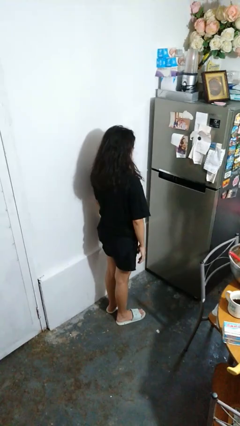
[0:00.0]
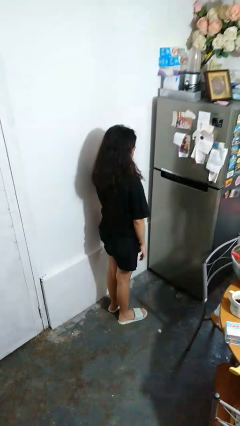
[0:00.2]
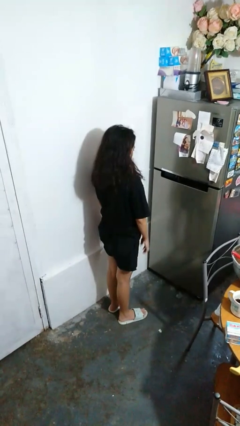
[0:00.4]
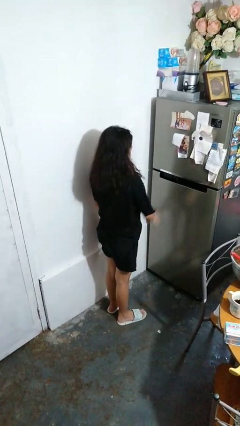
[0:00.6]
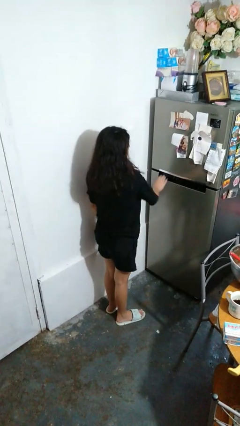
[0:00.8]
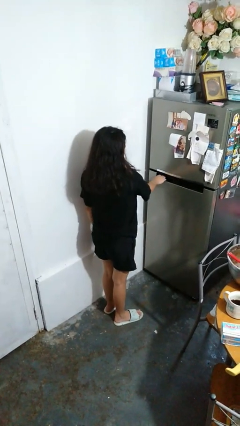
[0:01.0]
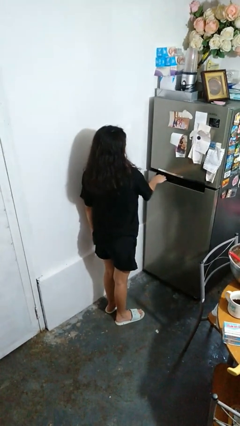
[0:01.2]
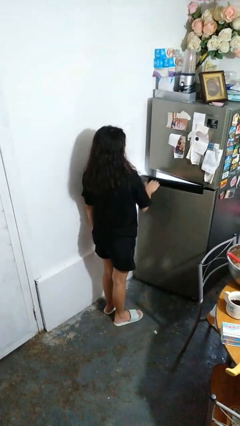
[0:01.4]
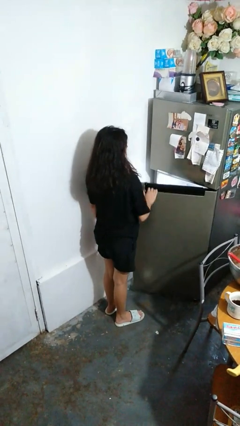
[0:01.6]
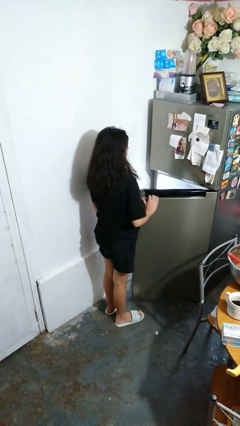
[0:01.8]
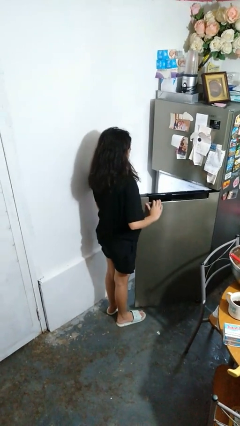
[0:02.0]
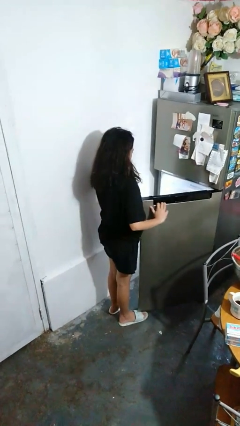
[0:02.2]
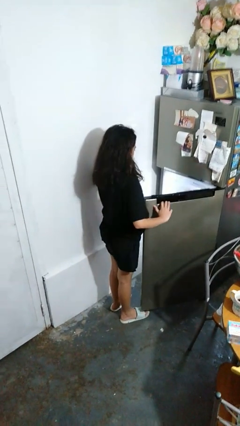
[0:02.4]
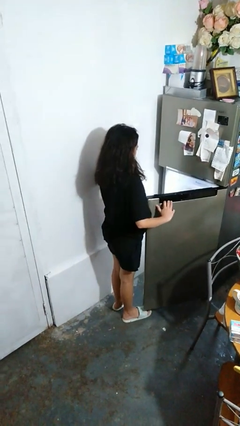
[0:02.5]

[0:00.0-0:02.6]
person opens refrigerator

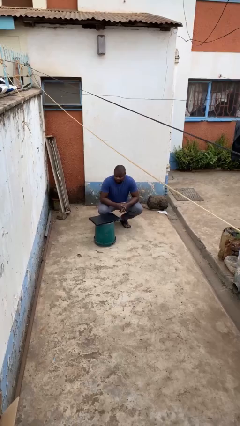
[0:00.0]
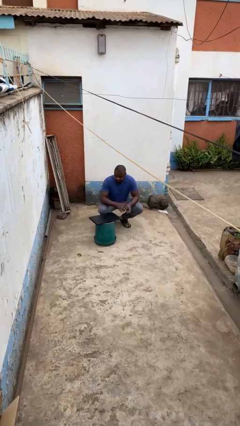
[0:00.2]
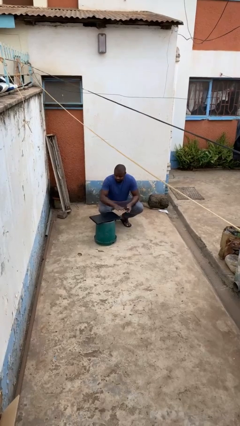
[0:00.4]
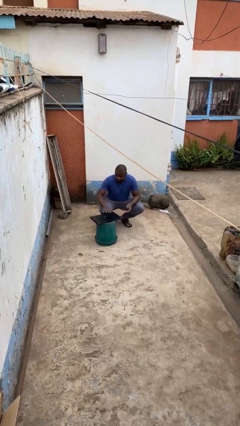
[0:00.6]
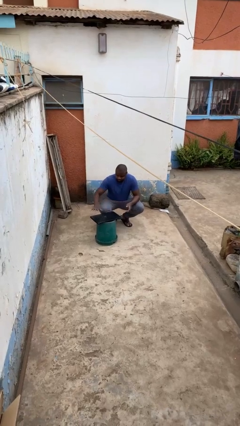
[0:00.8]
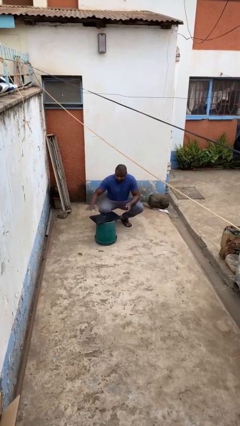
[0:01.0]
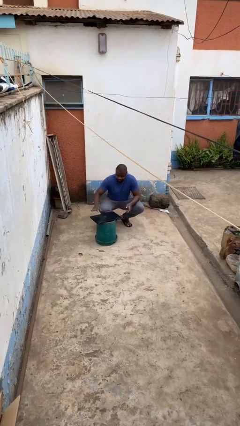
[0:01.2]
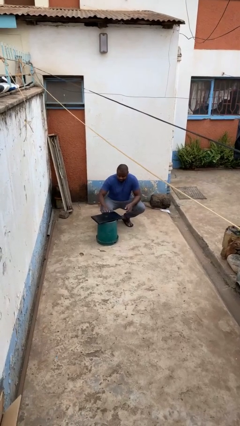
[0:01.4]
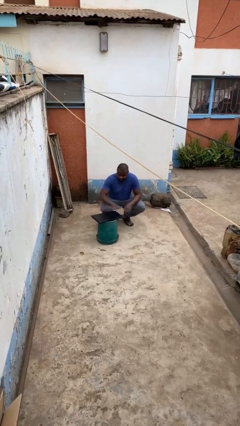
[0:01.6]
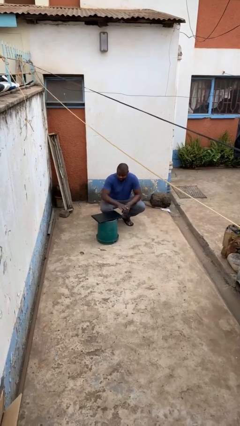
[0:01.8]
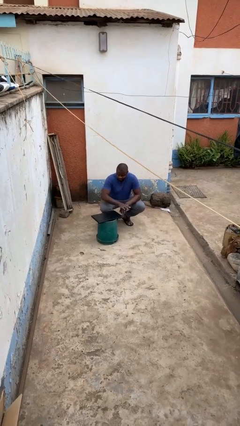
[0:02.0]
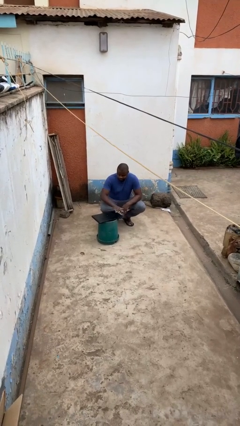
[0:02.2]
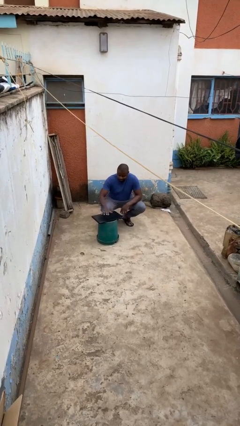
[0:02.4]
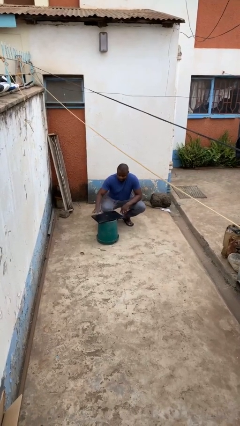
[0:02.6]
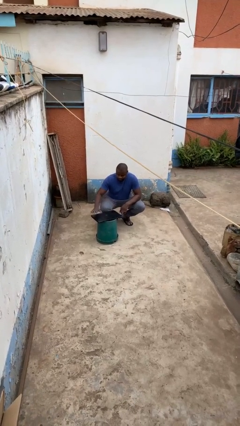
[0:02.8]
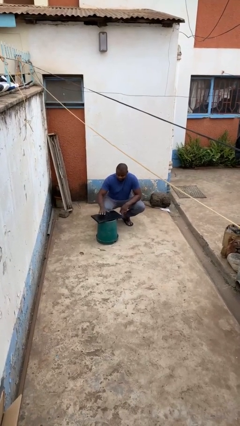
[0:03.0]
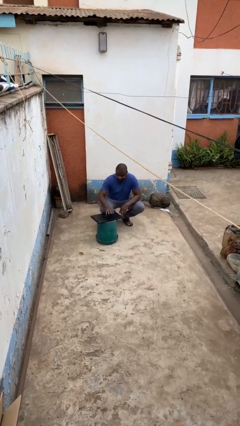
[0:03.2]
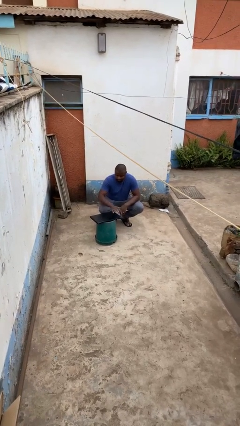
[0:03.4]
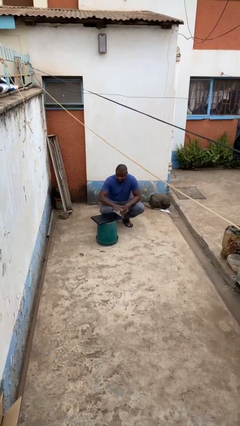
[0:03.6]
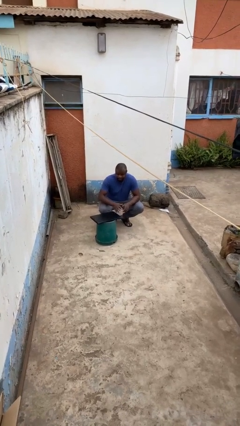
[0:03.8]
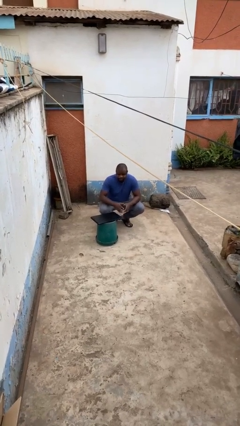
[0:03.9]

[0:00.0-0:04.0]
person waves hand over object

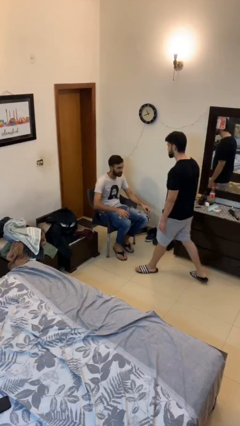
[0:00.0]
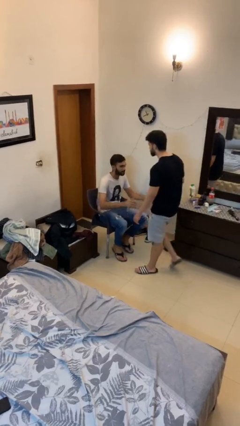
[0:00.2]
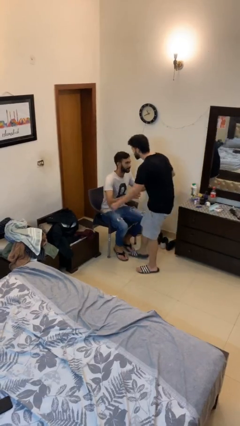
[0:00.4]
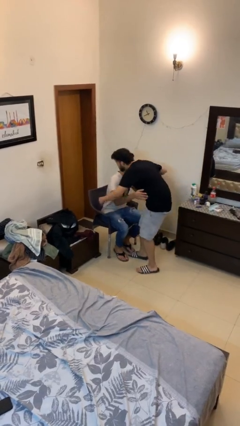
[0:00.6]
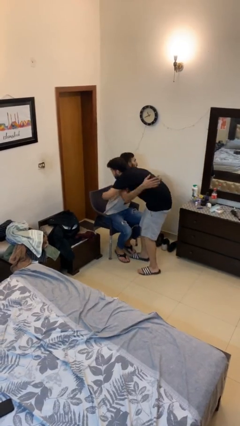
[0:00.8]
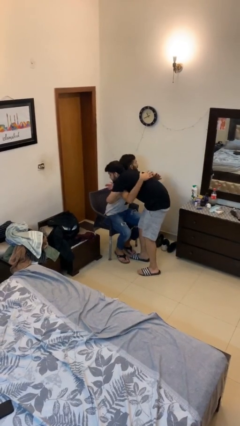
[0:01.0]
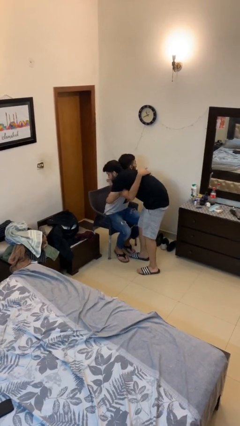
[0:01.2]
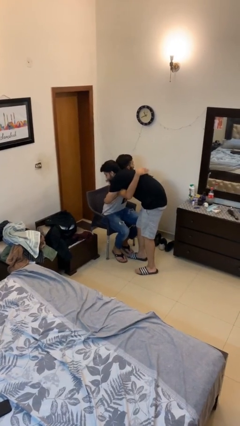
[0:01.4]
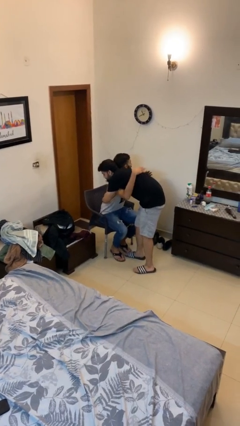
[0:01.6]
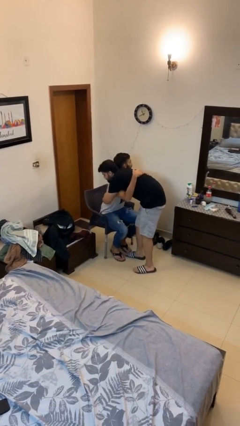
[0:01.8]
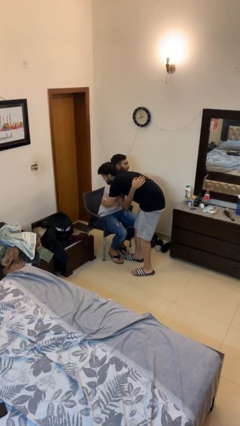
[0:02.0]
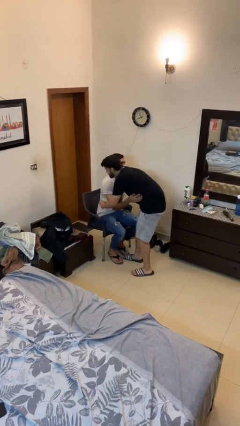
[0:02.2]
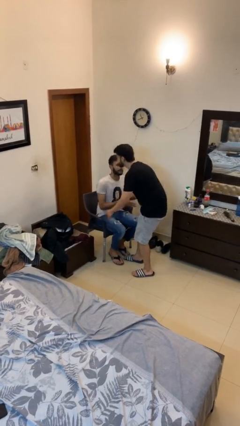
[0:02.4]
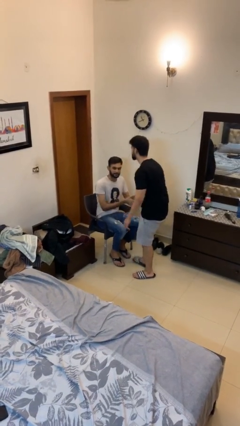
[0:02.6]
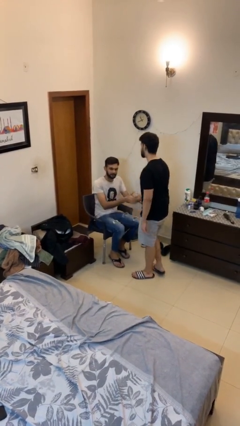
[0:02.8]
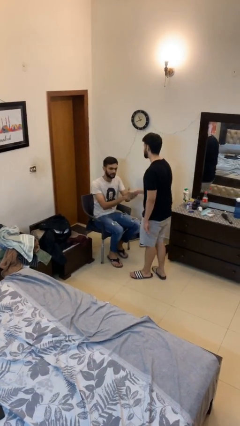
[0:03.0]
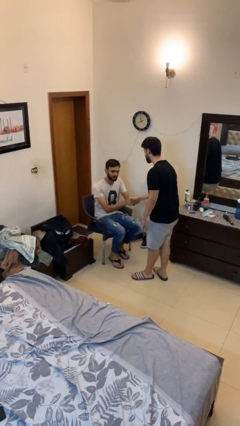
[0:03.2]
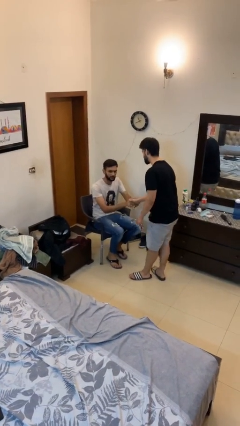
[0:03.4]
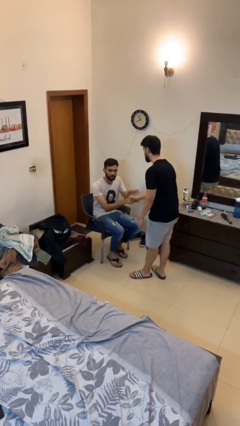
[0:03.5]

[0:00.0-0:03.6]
person embraces person

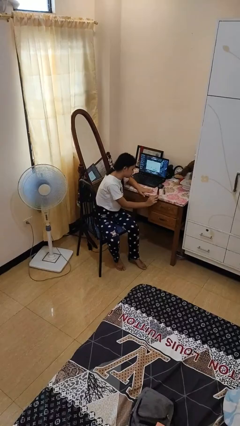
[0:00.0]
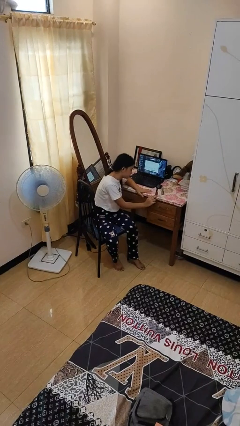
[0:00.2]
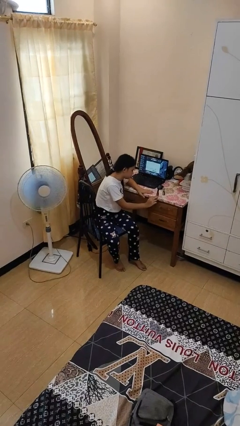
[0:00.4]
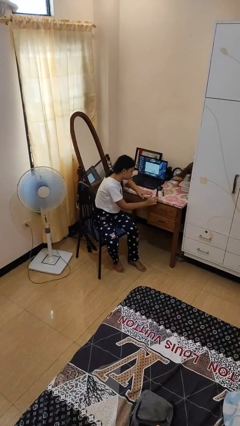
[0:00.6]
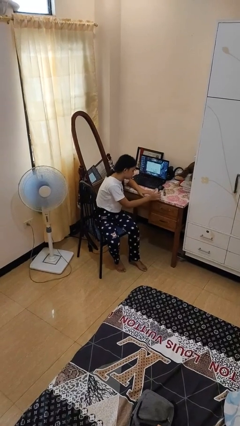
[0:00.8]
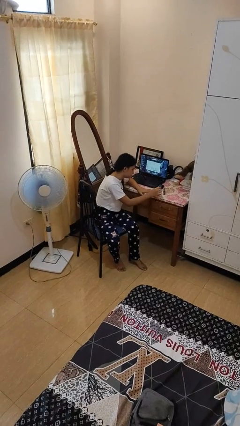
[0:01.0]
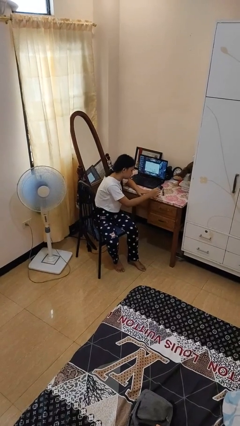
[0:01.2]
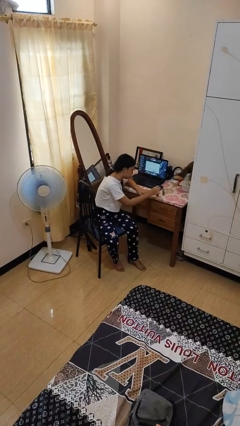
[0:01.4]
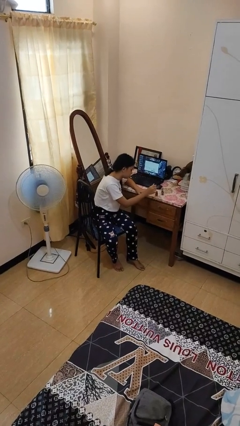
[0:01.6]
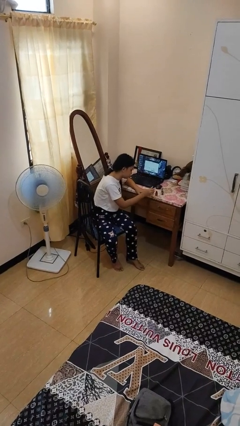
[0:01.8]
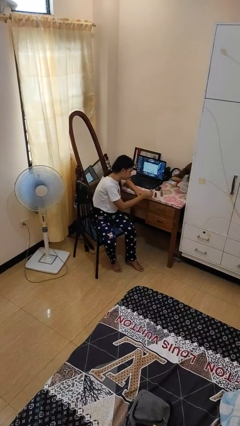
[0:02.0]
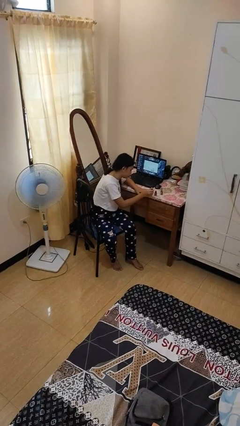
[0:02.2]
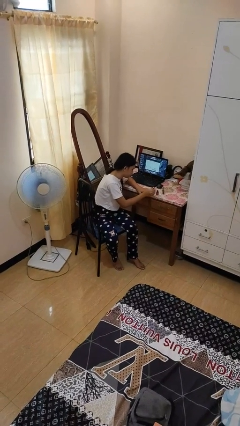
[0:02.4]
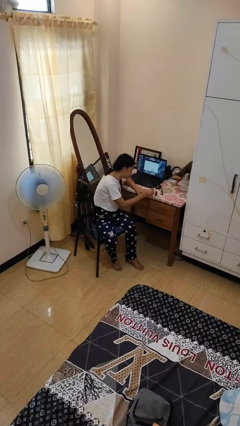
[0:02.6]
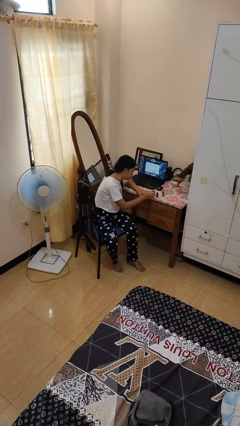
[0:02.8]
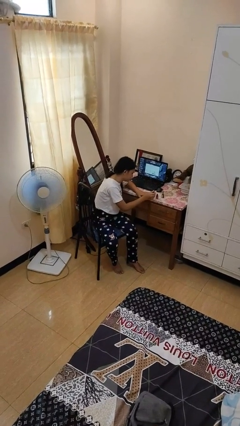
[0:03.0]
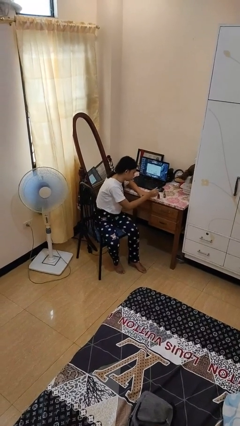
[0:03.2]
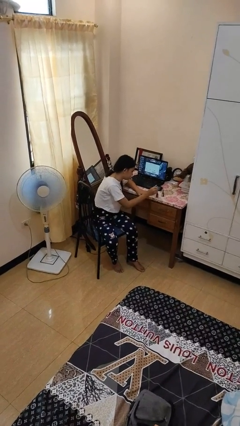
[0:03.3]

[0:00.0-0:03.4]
person paints fingernails

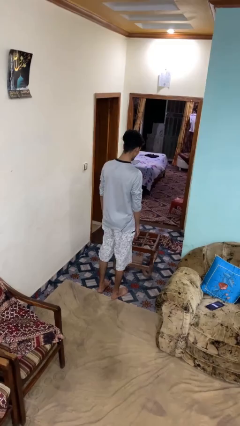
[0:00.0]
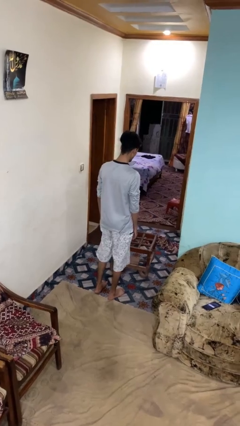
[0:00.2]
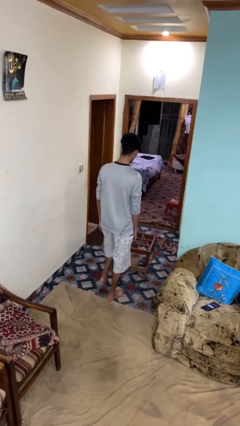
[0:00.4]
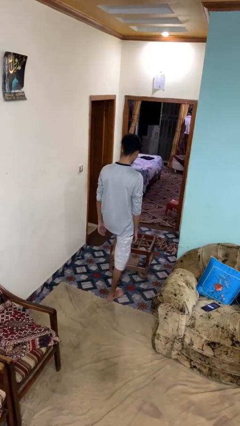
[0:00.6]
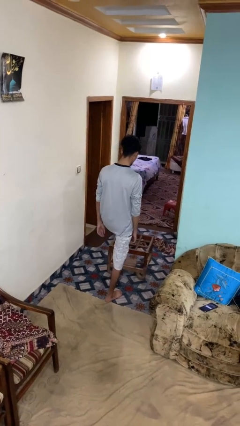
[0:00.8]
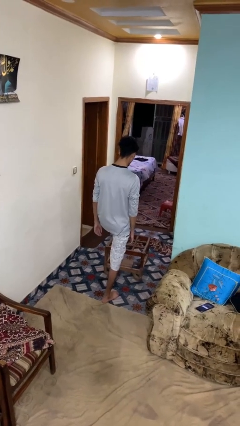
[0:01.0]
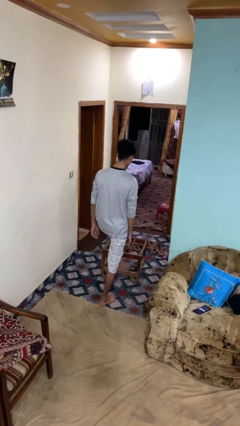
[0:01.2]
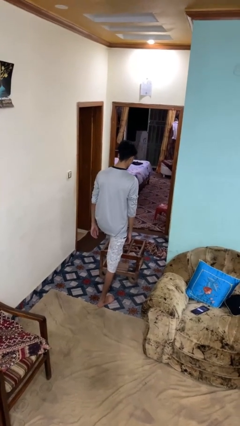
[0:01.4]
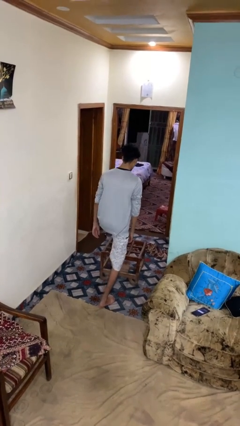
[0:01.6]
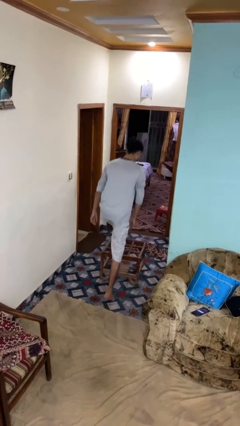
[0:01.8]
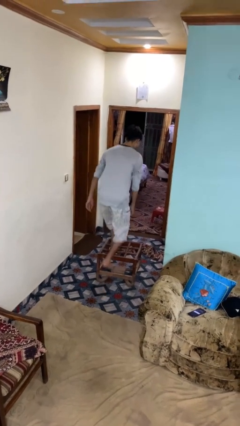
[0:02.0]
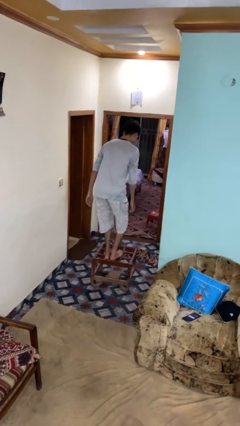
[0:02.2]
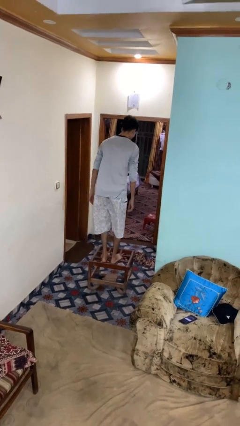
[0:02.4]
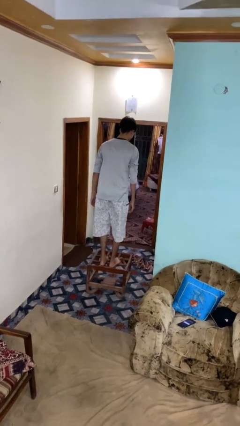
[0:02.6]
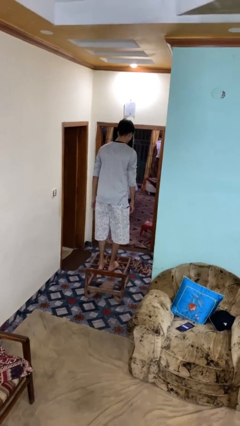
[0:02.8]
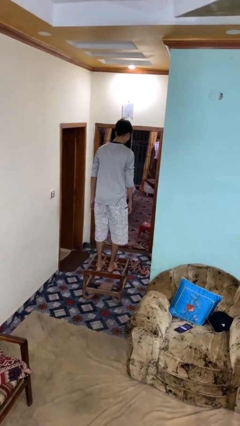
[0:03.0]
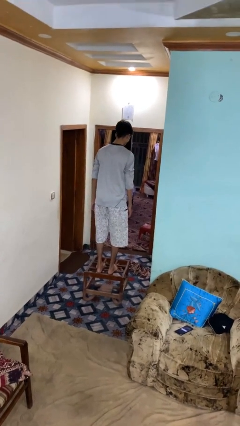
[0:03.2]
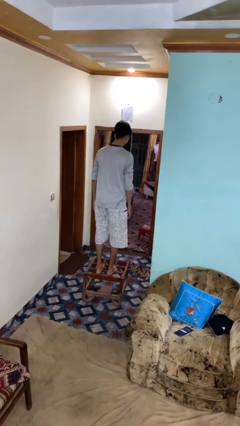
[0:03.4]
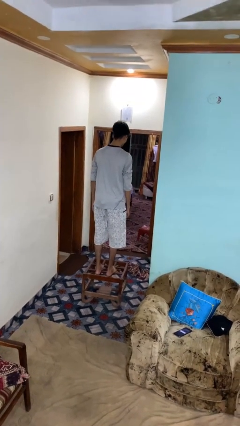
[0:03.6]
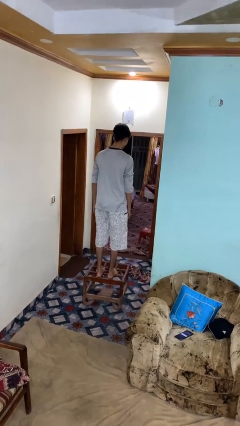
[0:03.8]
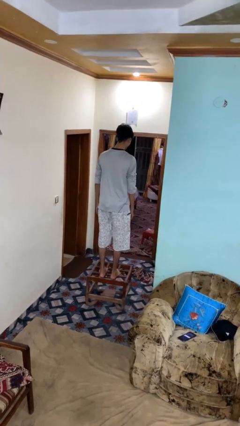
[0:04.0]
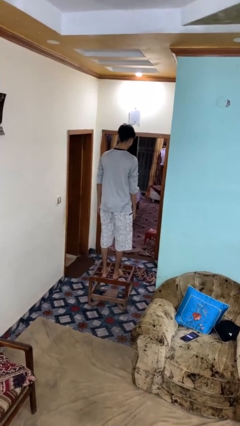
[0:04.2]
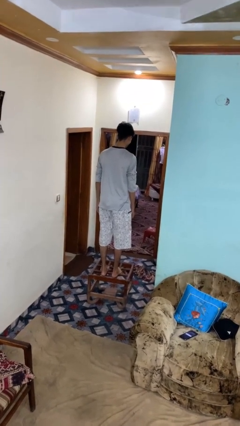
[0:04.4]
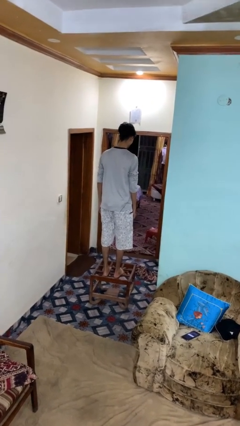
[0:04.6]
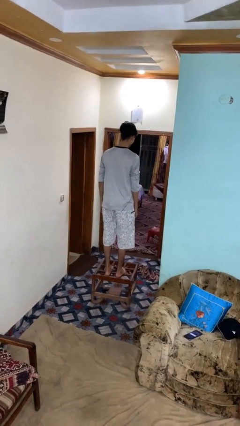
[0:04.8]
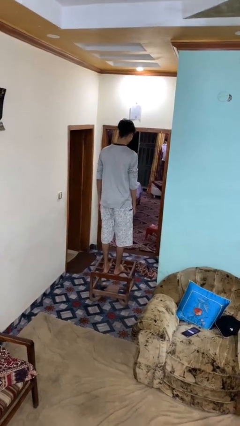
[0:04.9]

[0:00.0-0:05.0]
person climbs on table
